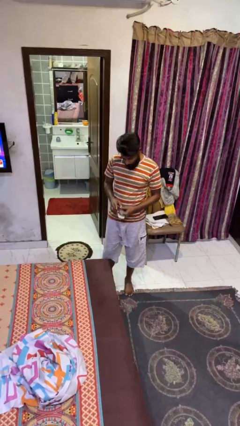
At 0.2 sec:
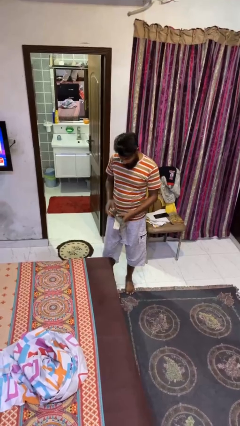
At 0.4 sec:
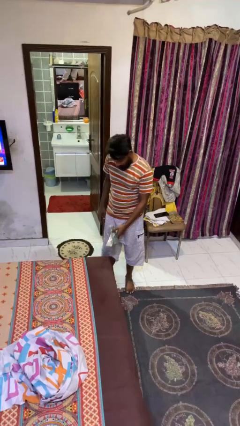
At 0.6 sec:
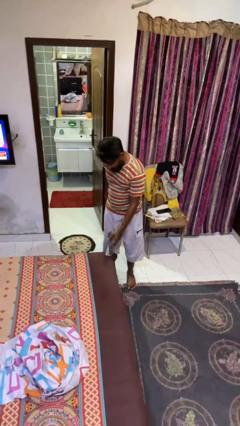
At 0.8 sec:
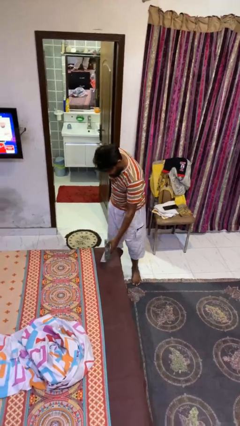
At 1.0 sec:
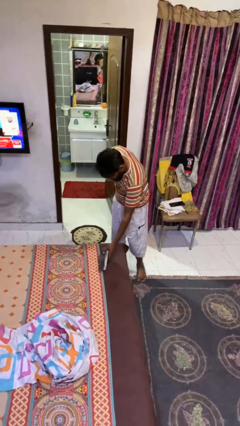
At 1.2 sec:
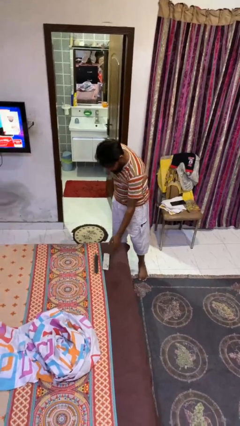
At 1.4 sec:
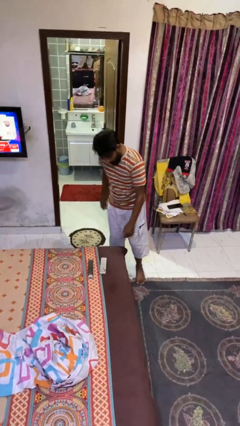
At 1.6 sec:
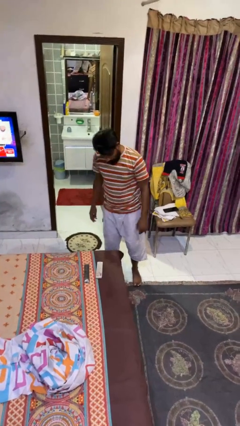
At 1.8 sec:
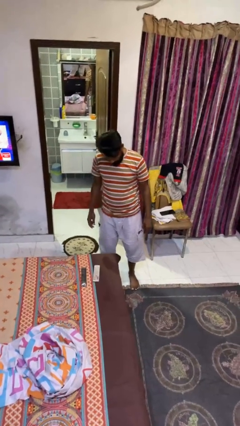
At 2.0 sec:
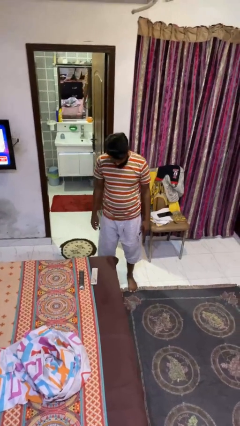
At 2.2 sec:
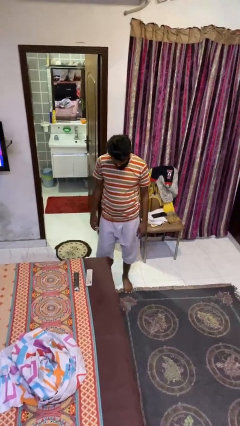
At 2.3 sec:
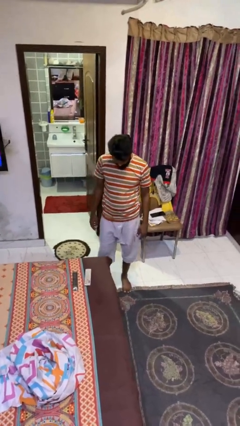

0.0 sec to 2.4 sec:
person puts down object on bed

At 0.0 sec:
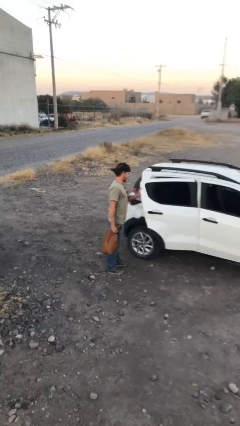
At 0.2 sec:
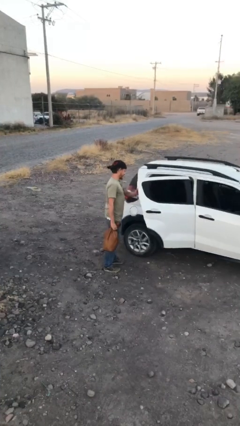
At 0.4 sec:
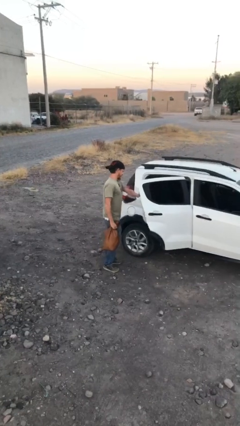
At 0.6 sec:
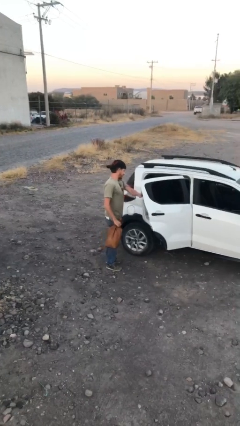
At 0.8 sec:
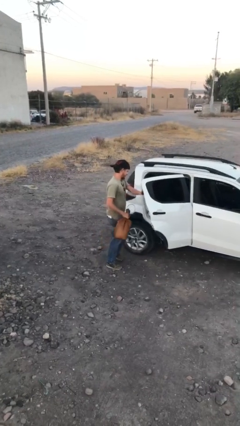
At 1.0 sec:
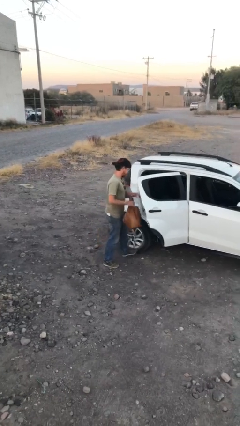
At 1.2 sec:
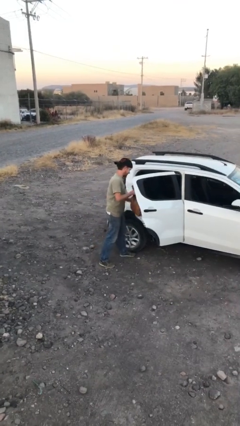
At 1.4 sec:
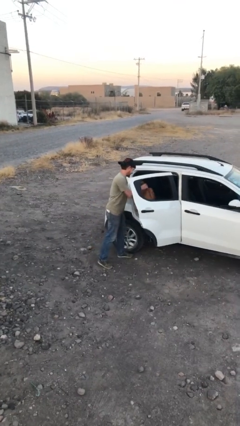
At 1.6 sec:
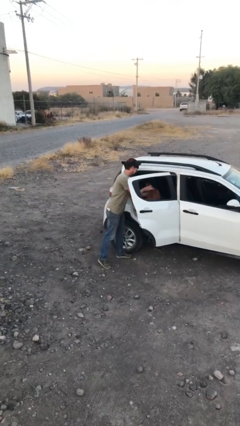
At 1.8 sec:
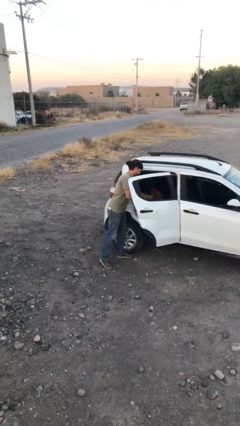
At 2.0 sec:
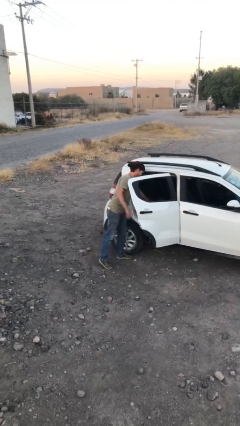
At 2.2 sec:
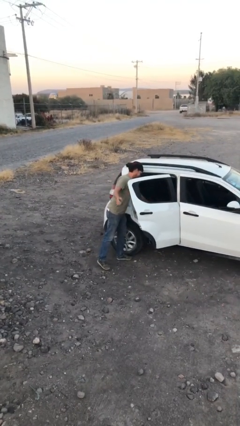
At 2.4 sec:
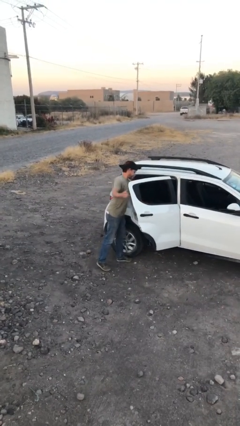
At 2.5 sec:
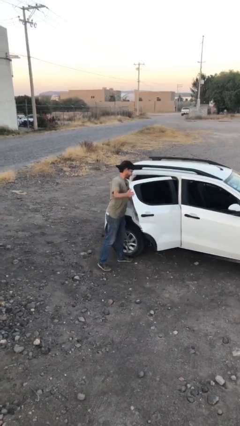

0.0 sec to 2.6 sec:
person loads car

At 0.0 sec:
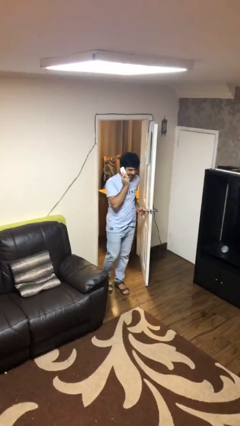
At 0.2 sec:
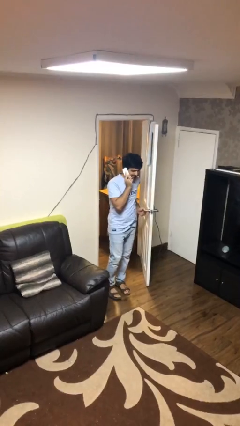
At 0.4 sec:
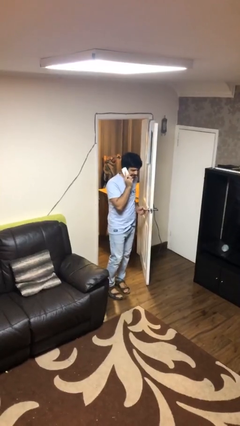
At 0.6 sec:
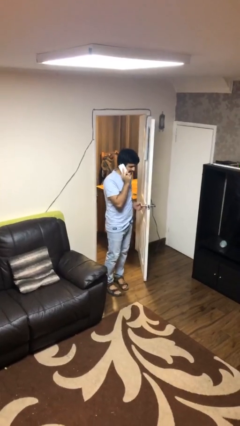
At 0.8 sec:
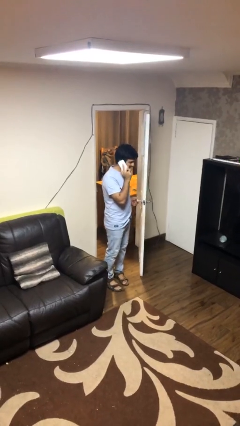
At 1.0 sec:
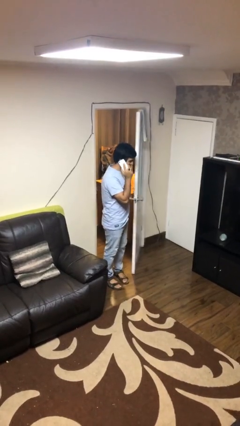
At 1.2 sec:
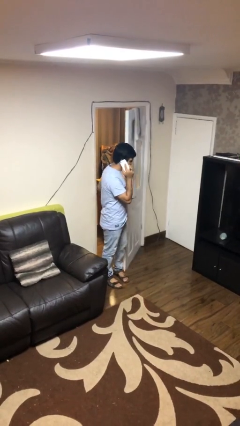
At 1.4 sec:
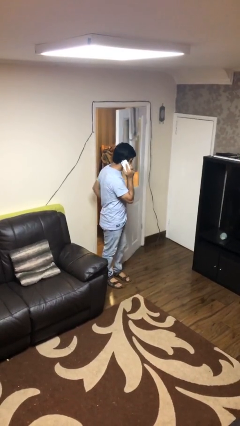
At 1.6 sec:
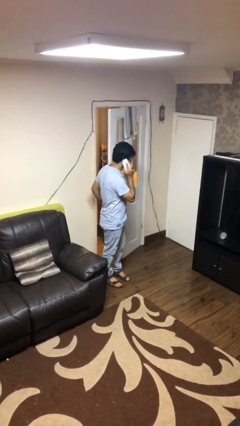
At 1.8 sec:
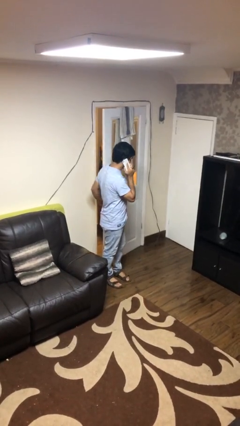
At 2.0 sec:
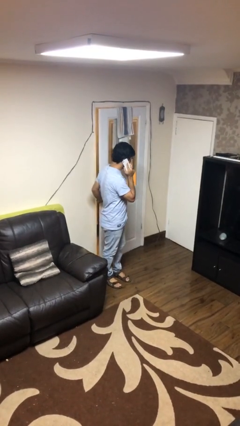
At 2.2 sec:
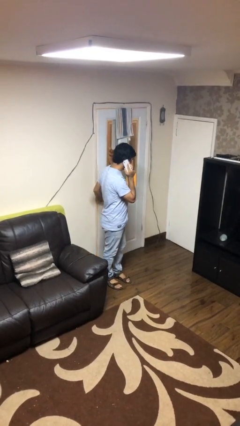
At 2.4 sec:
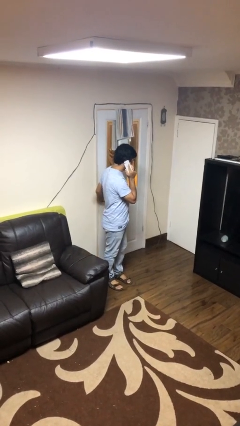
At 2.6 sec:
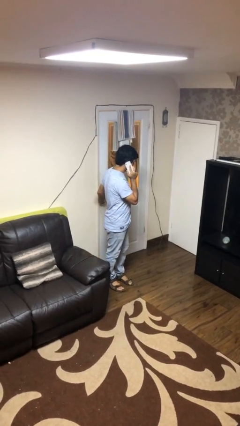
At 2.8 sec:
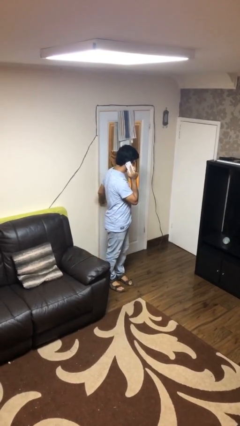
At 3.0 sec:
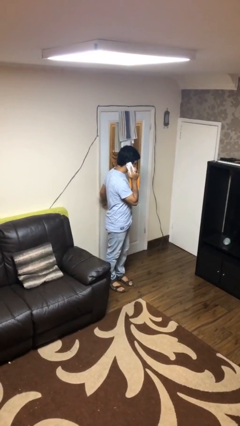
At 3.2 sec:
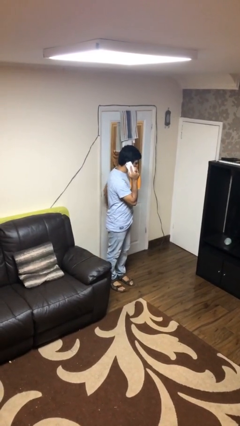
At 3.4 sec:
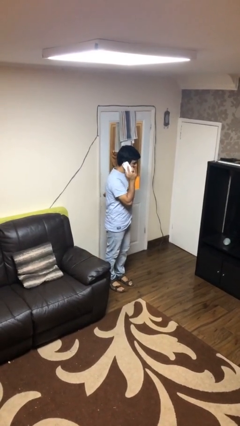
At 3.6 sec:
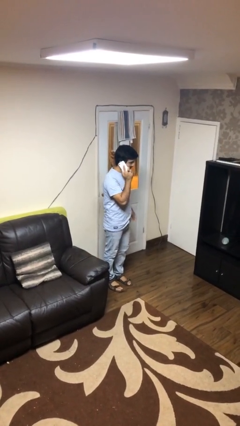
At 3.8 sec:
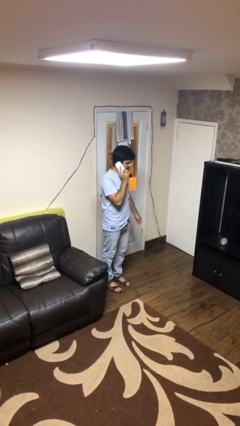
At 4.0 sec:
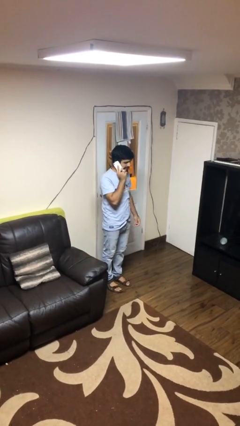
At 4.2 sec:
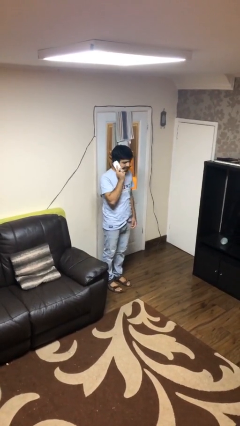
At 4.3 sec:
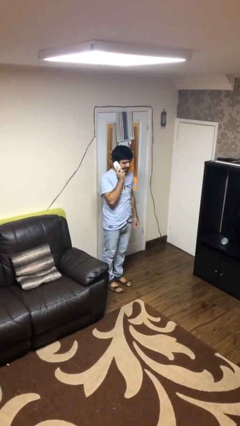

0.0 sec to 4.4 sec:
person closes facility door

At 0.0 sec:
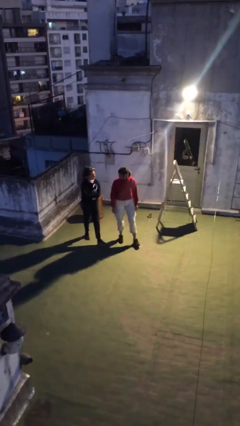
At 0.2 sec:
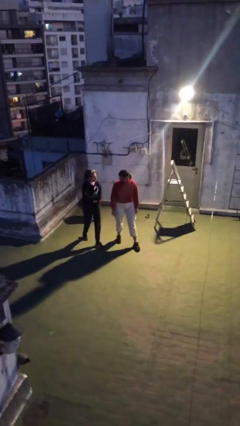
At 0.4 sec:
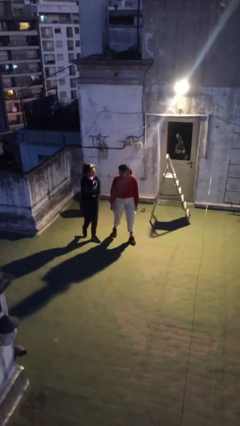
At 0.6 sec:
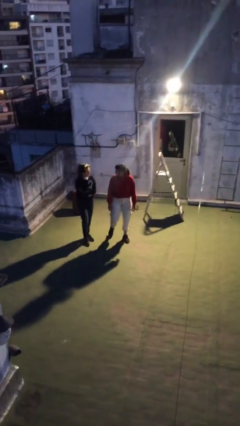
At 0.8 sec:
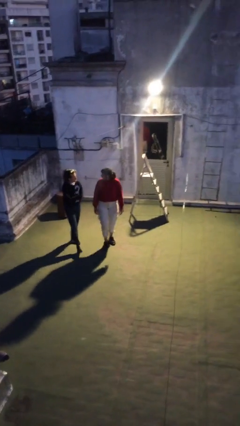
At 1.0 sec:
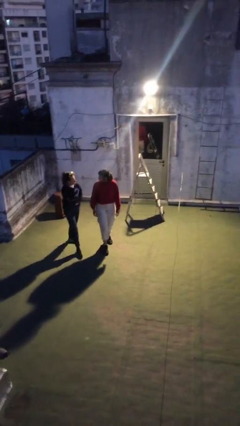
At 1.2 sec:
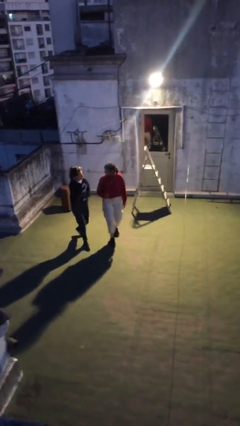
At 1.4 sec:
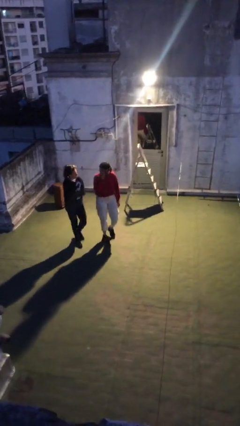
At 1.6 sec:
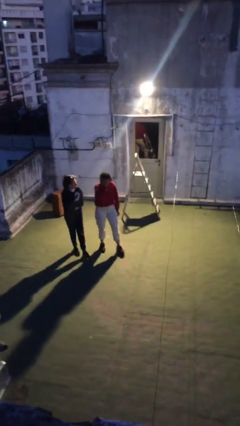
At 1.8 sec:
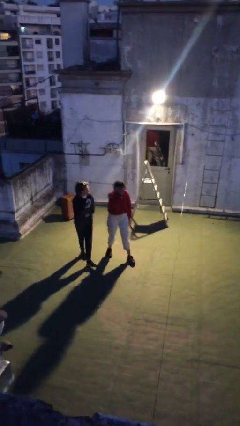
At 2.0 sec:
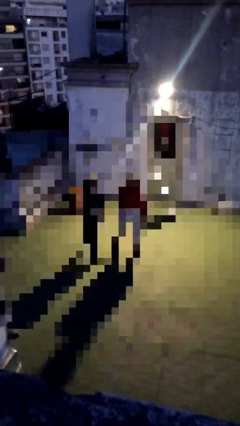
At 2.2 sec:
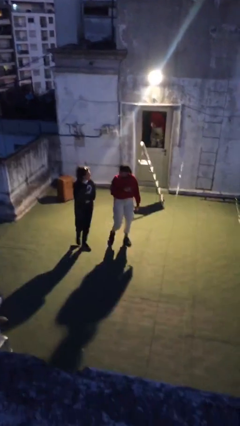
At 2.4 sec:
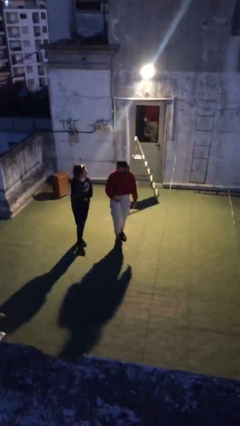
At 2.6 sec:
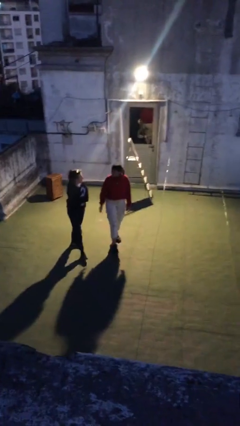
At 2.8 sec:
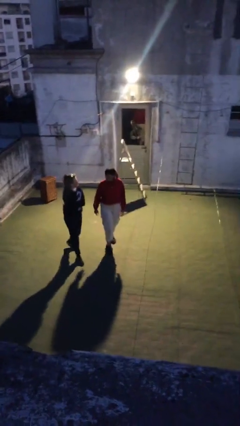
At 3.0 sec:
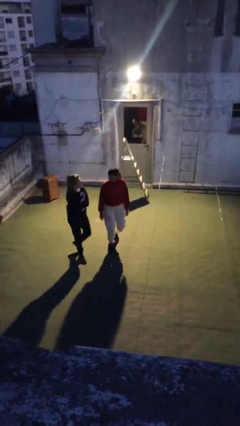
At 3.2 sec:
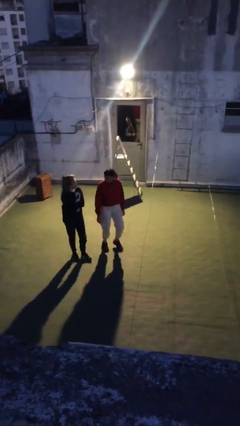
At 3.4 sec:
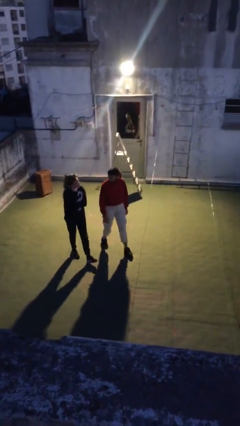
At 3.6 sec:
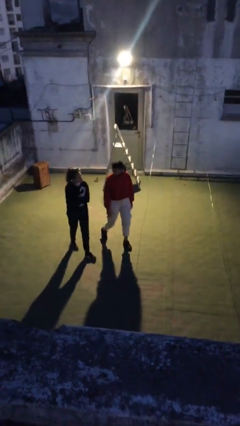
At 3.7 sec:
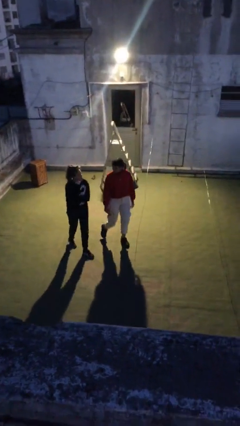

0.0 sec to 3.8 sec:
person talks to person

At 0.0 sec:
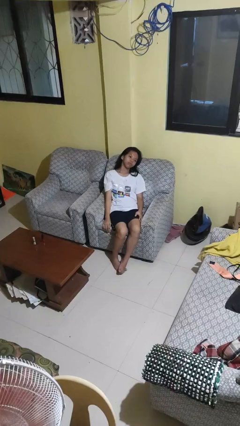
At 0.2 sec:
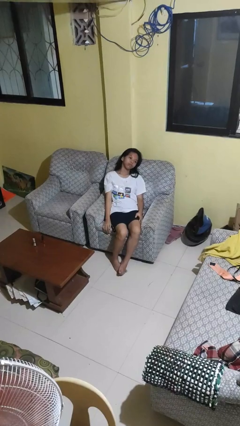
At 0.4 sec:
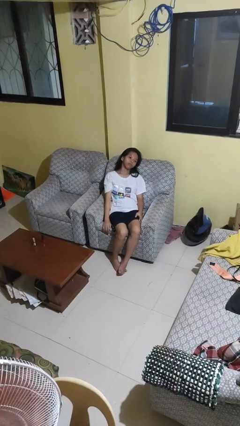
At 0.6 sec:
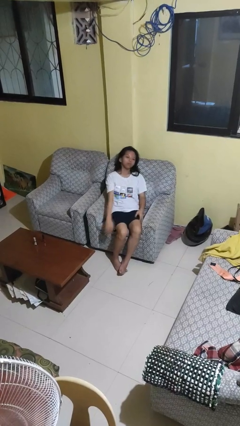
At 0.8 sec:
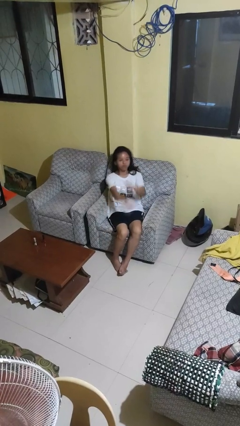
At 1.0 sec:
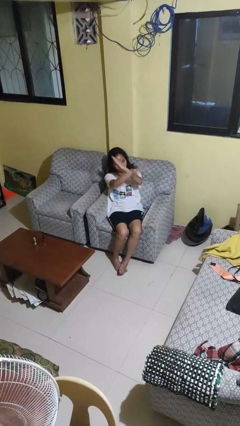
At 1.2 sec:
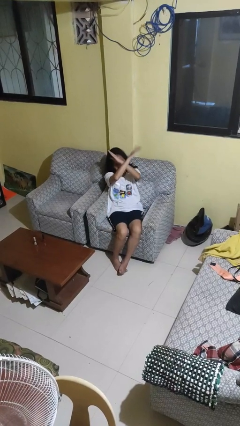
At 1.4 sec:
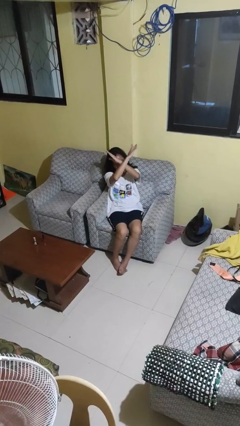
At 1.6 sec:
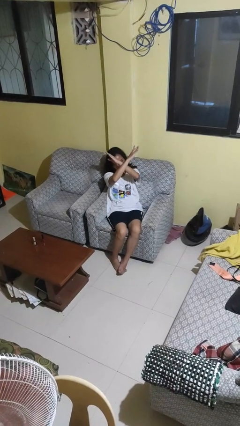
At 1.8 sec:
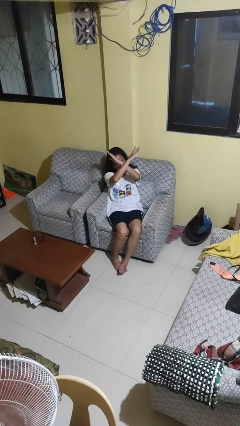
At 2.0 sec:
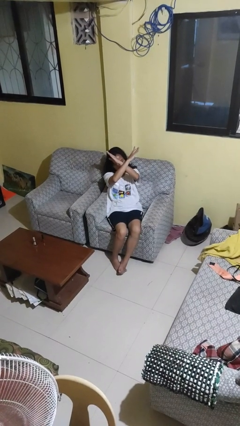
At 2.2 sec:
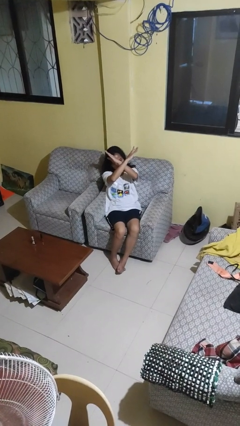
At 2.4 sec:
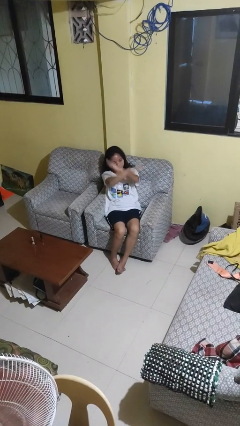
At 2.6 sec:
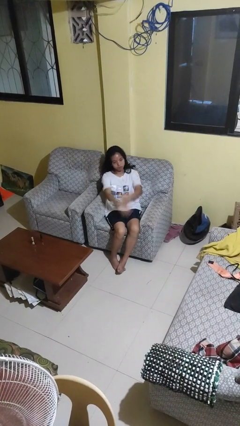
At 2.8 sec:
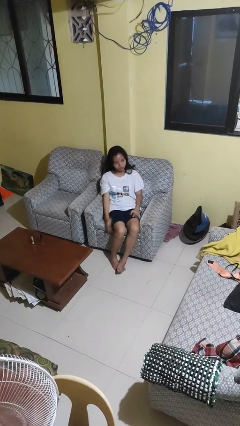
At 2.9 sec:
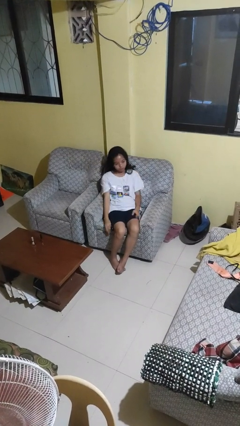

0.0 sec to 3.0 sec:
person gestures arms x

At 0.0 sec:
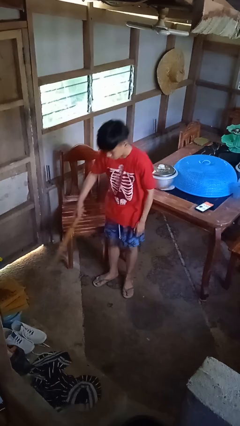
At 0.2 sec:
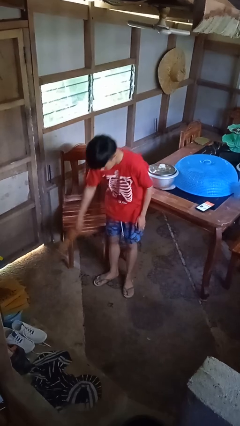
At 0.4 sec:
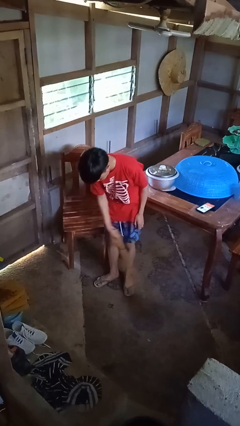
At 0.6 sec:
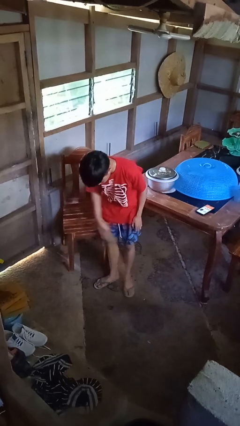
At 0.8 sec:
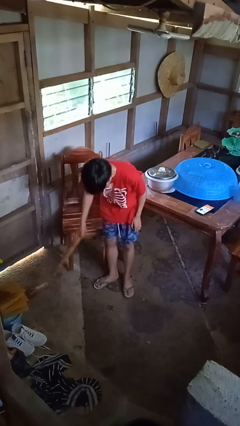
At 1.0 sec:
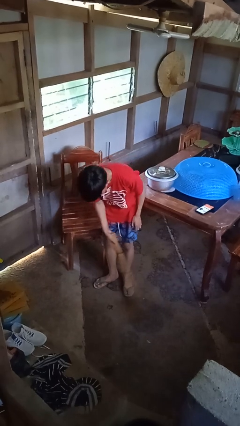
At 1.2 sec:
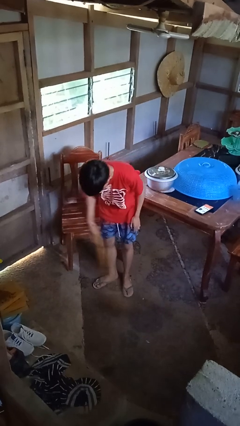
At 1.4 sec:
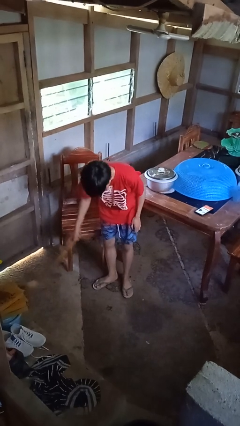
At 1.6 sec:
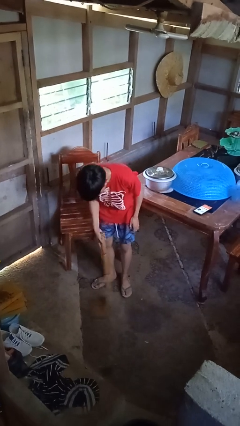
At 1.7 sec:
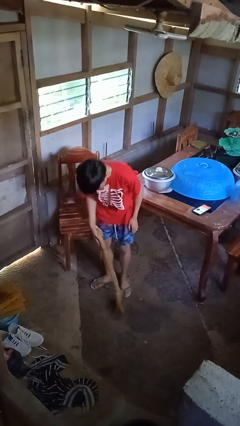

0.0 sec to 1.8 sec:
person sweeps floor
